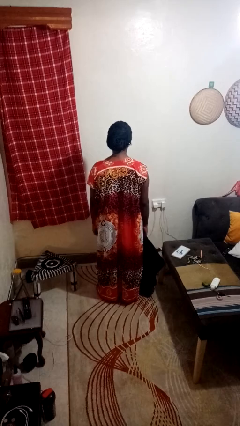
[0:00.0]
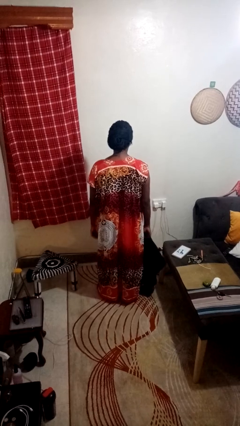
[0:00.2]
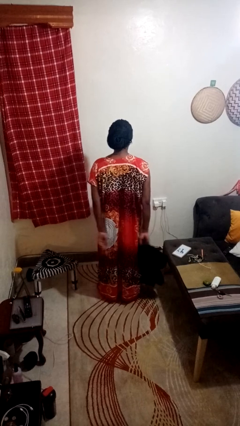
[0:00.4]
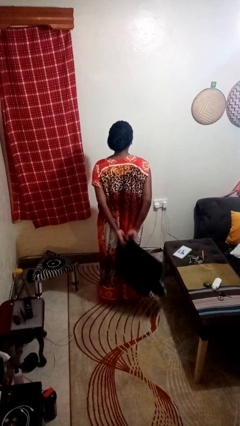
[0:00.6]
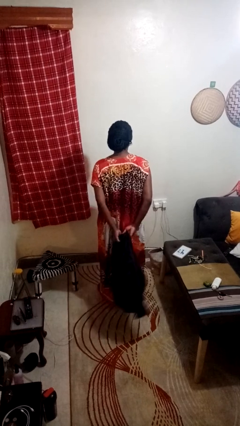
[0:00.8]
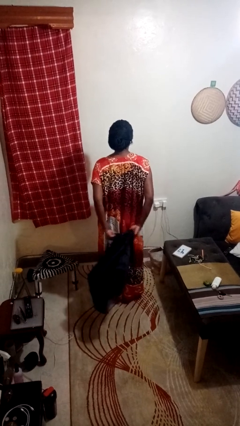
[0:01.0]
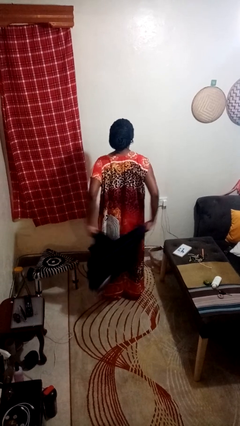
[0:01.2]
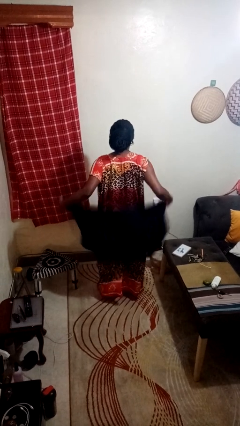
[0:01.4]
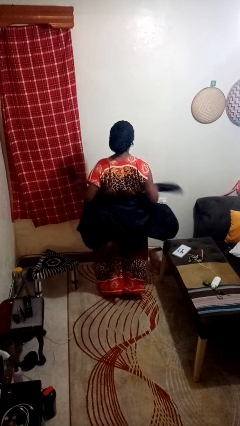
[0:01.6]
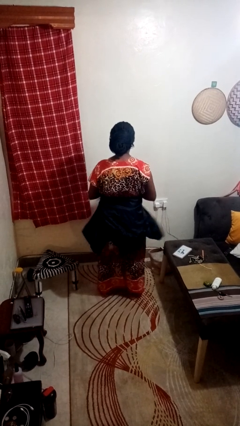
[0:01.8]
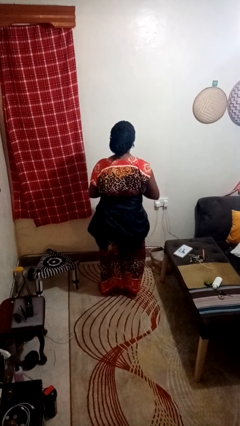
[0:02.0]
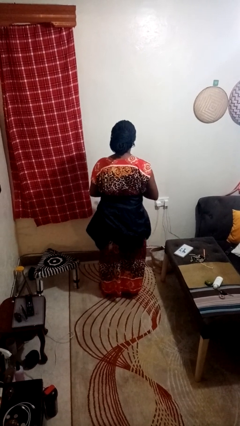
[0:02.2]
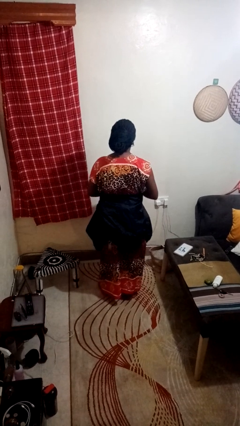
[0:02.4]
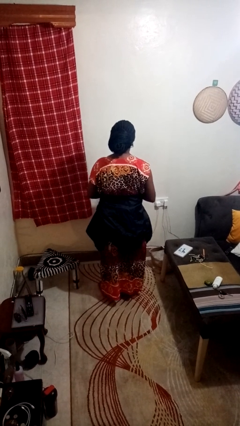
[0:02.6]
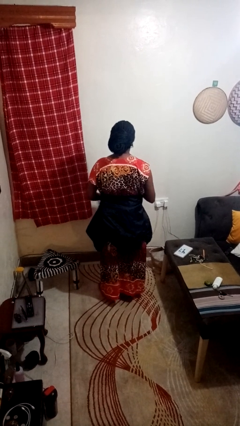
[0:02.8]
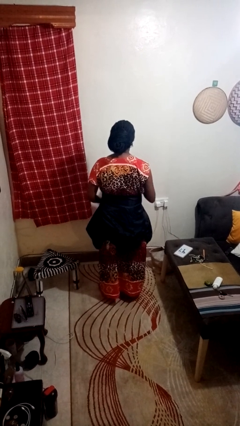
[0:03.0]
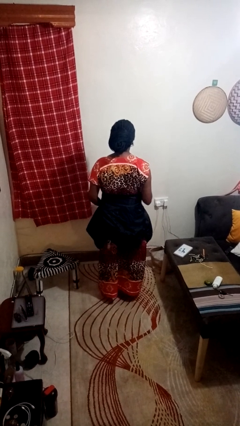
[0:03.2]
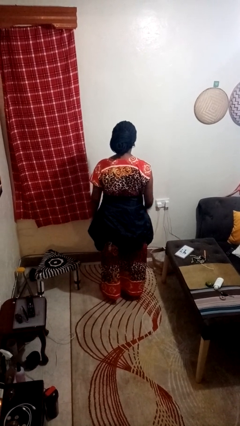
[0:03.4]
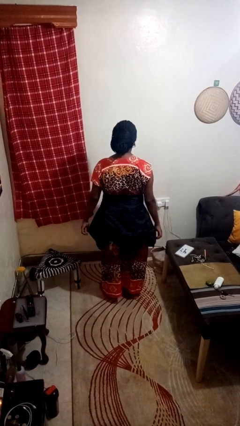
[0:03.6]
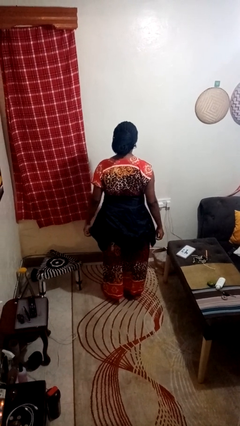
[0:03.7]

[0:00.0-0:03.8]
person ties jacket around waist

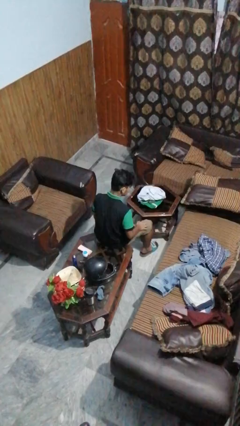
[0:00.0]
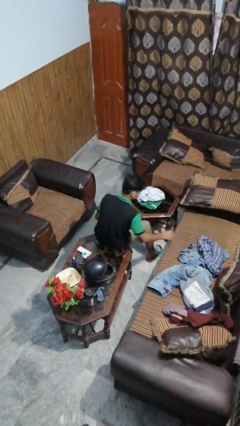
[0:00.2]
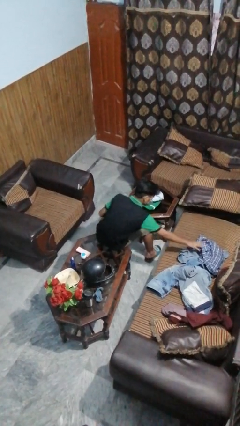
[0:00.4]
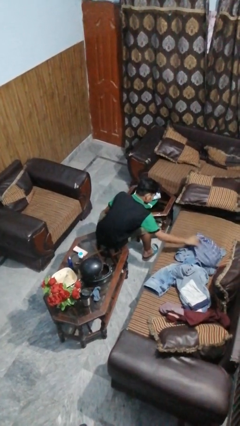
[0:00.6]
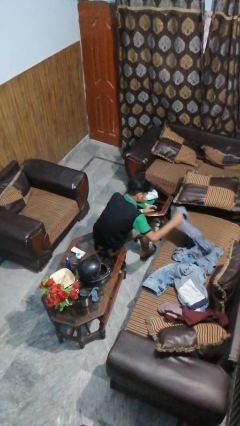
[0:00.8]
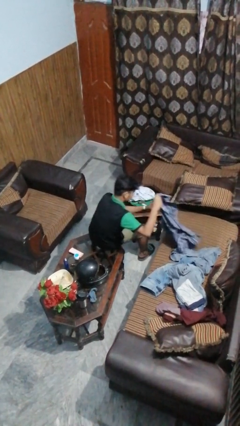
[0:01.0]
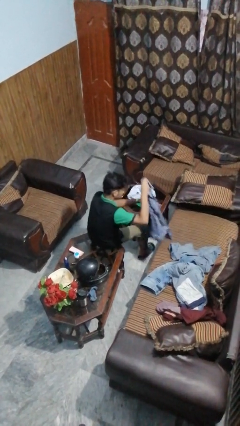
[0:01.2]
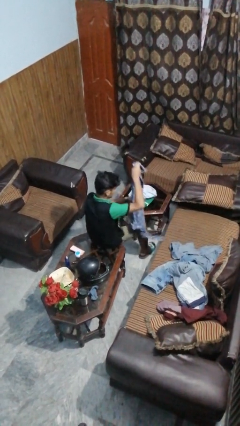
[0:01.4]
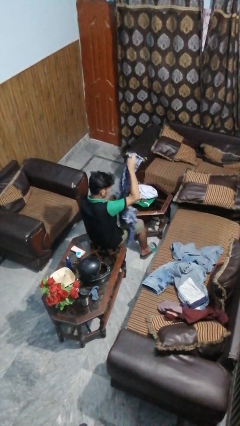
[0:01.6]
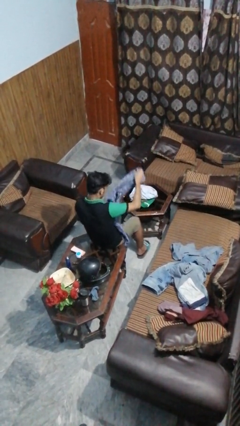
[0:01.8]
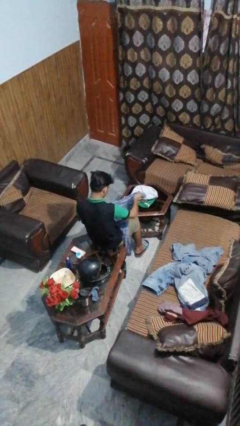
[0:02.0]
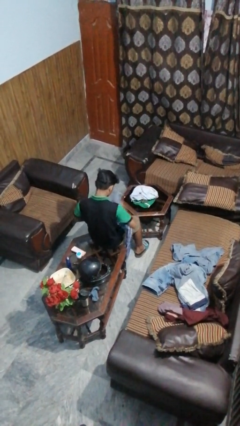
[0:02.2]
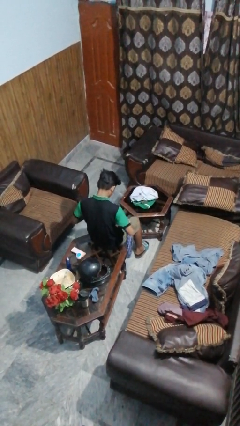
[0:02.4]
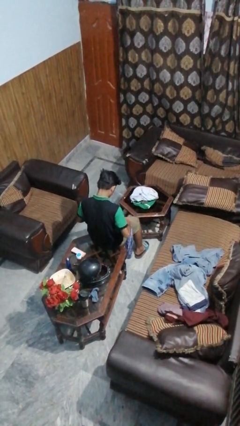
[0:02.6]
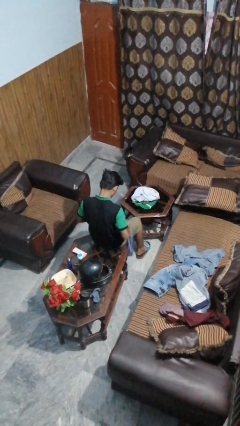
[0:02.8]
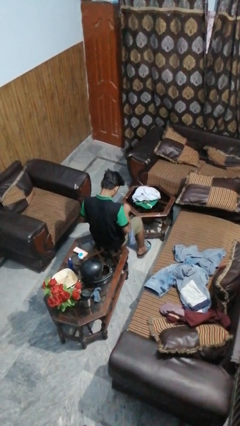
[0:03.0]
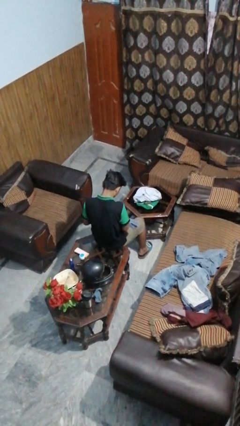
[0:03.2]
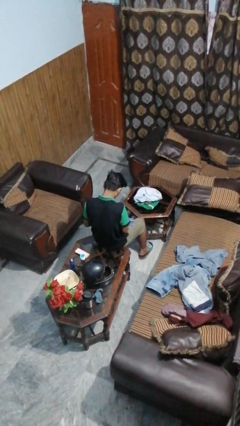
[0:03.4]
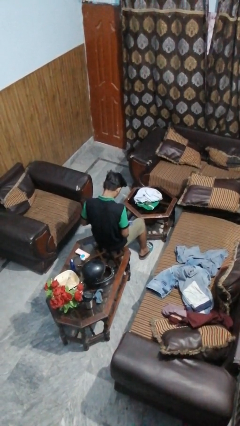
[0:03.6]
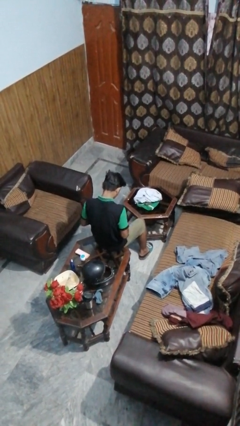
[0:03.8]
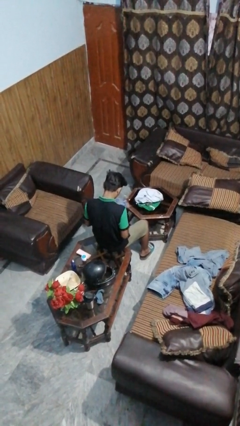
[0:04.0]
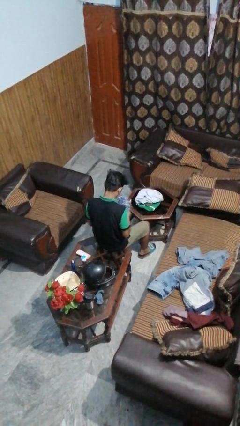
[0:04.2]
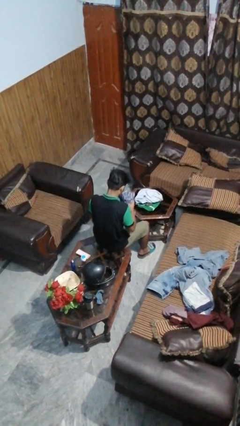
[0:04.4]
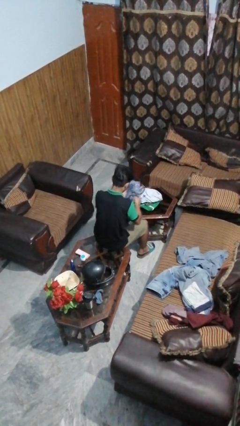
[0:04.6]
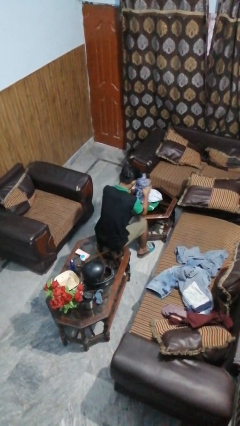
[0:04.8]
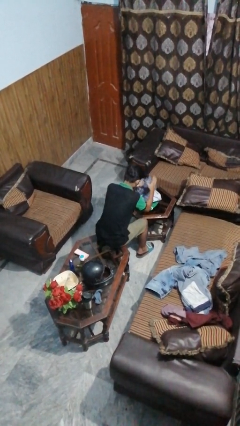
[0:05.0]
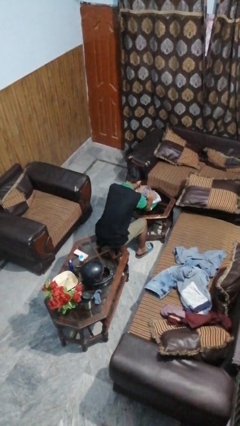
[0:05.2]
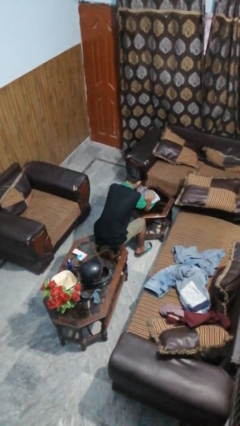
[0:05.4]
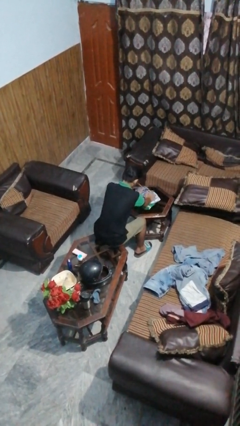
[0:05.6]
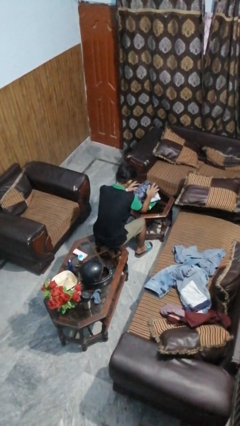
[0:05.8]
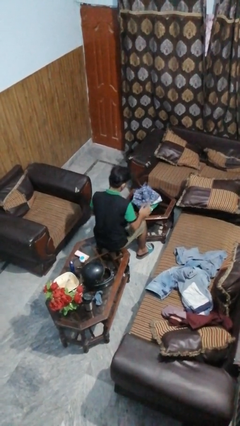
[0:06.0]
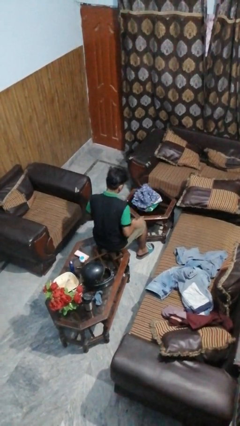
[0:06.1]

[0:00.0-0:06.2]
person folds shirt

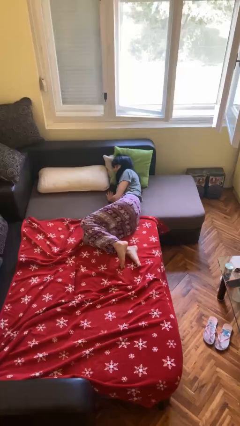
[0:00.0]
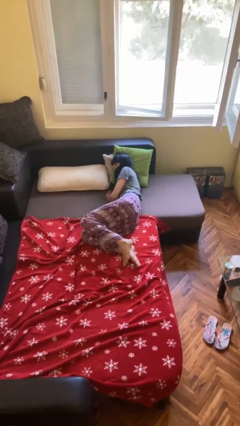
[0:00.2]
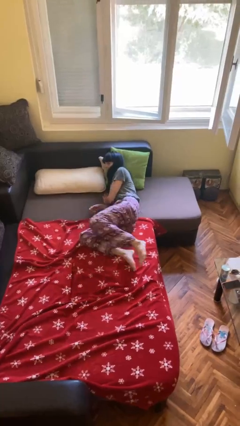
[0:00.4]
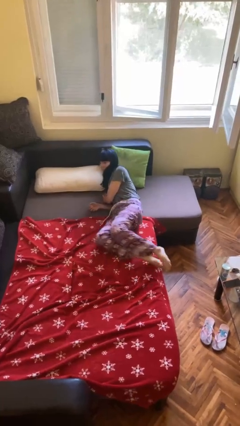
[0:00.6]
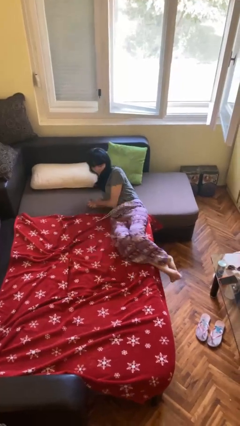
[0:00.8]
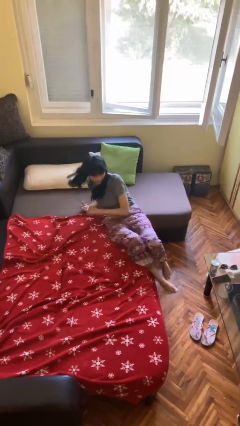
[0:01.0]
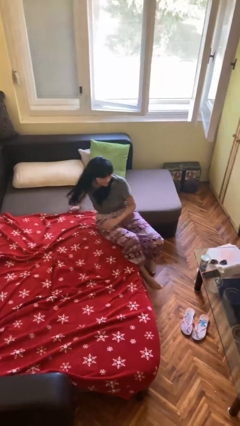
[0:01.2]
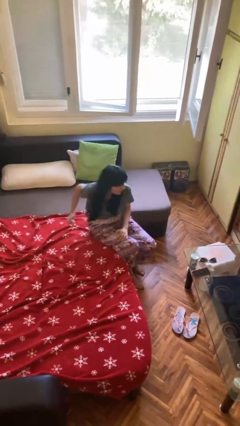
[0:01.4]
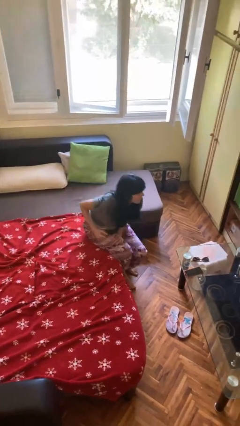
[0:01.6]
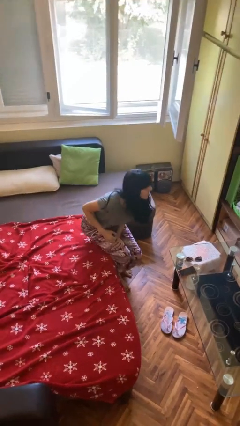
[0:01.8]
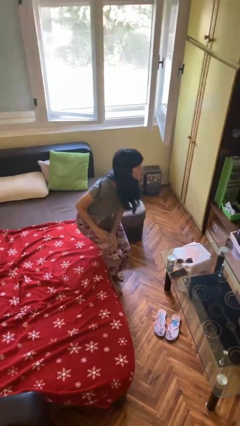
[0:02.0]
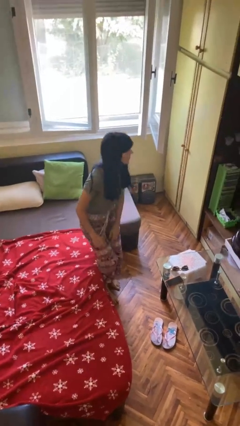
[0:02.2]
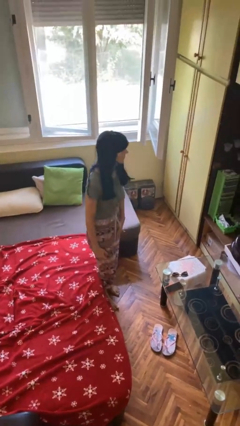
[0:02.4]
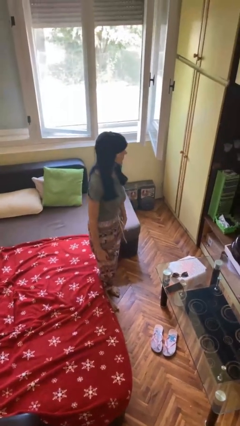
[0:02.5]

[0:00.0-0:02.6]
person stands up

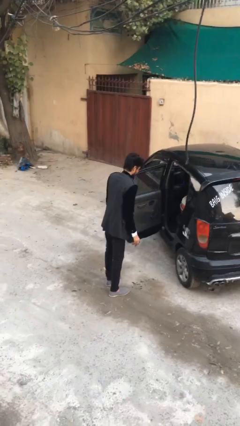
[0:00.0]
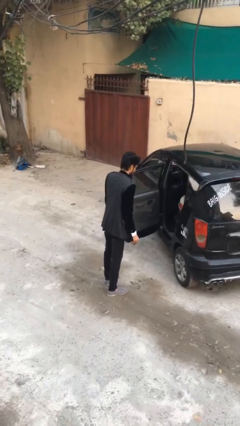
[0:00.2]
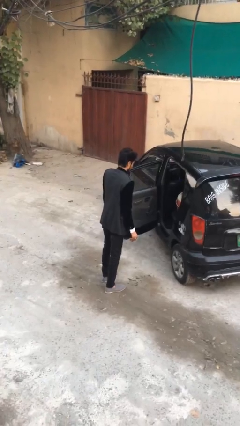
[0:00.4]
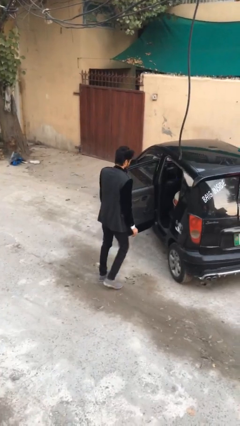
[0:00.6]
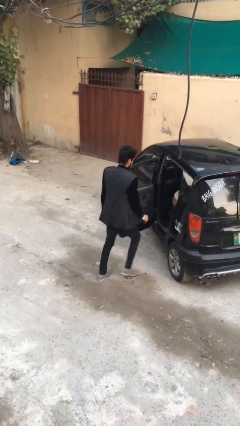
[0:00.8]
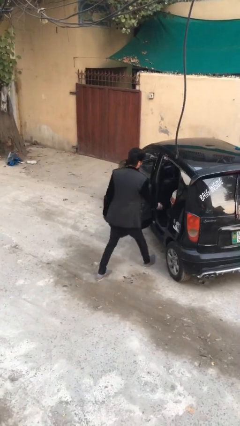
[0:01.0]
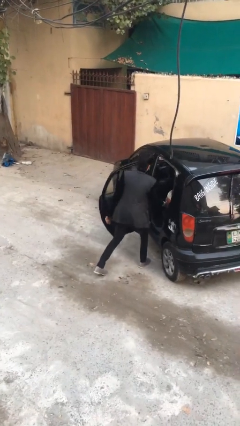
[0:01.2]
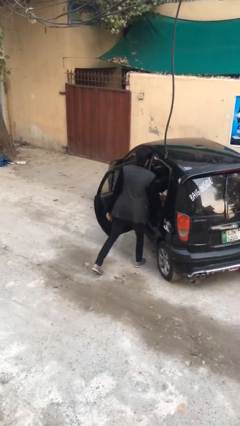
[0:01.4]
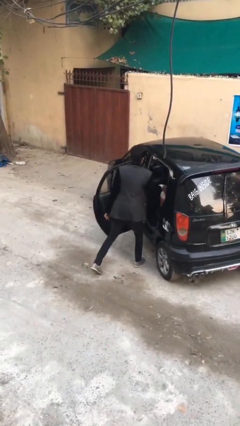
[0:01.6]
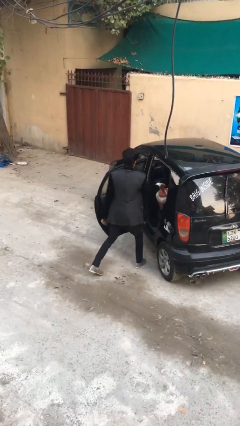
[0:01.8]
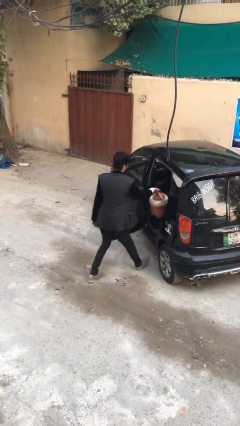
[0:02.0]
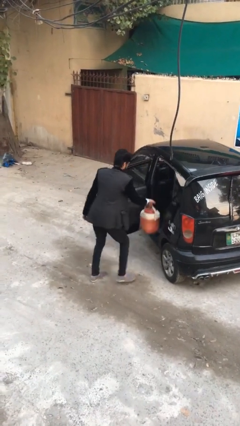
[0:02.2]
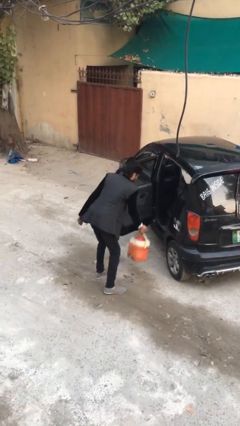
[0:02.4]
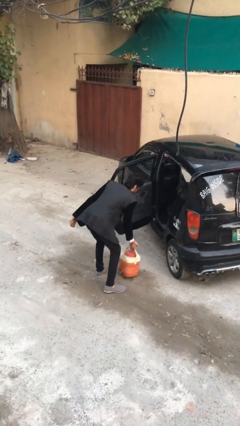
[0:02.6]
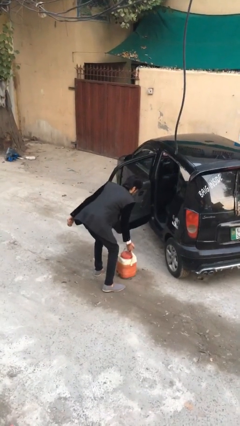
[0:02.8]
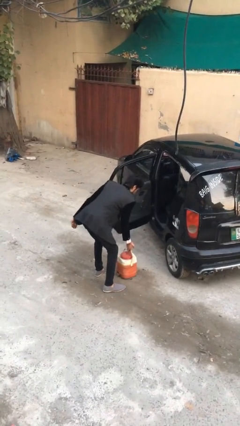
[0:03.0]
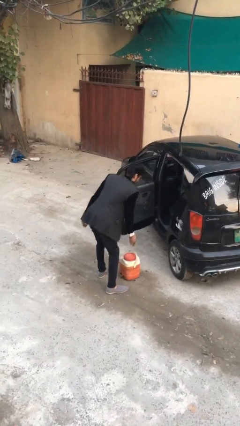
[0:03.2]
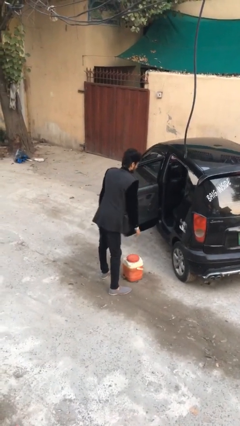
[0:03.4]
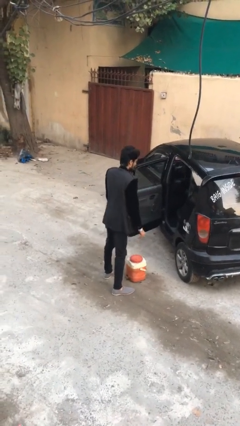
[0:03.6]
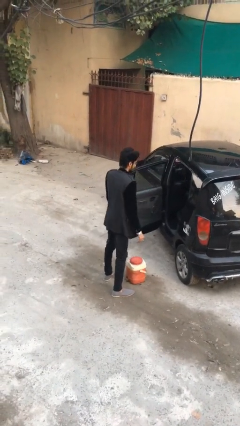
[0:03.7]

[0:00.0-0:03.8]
person unloads car

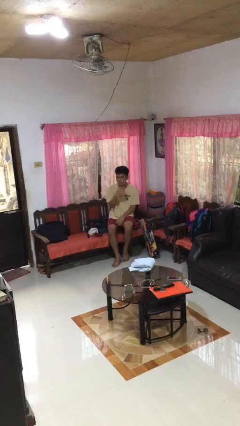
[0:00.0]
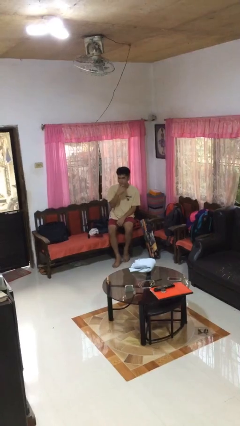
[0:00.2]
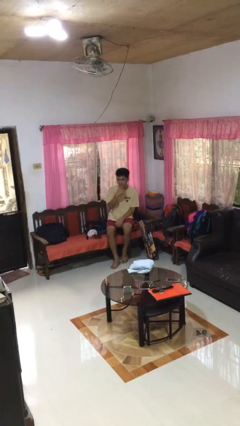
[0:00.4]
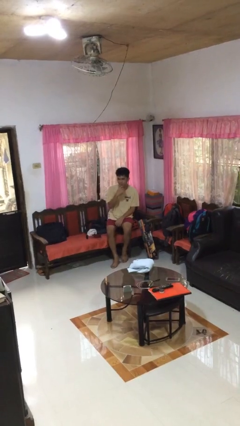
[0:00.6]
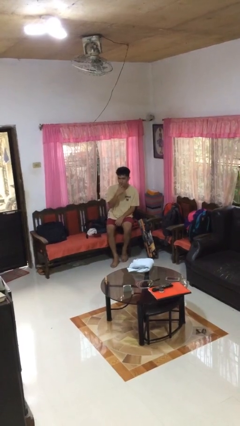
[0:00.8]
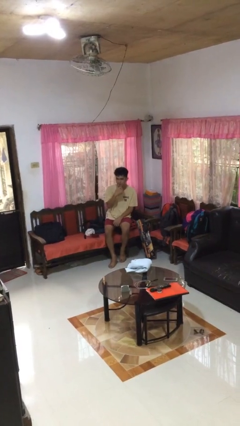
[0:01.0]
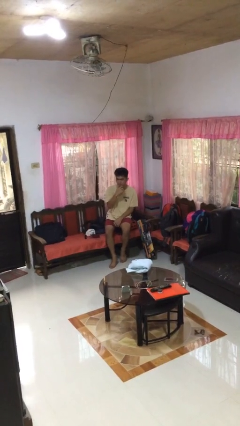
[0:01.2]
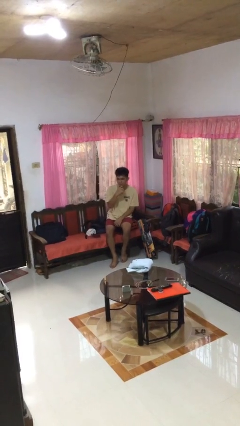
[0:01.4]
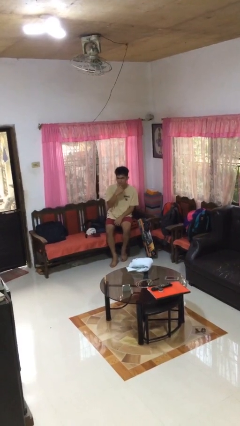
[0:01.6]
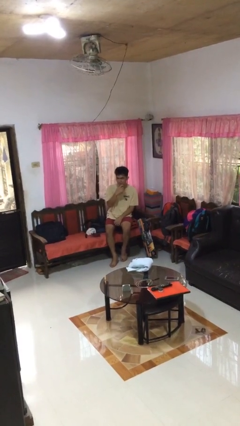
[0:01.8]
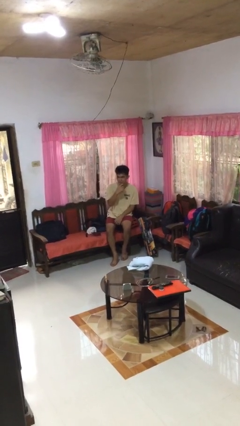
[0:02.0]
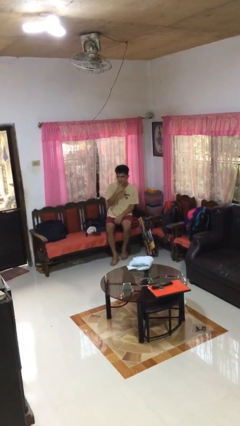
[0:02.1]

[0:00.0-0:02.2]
person strokes chin
